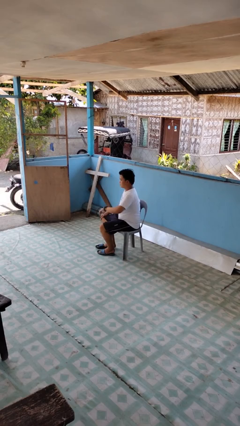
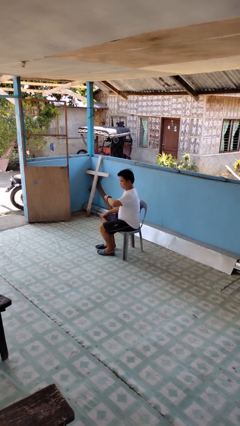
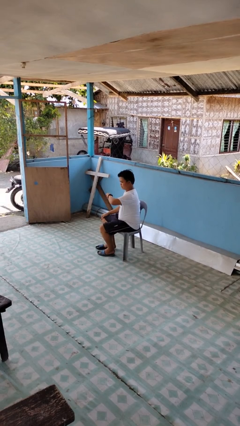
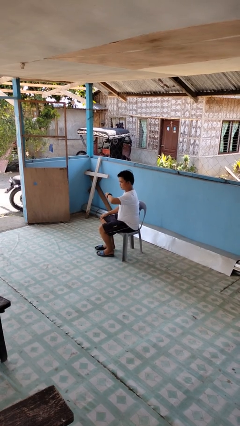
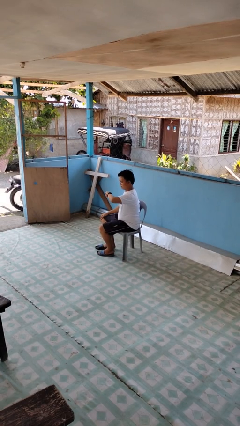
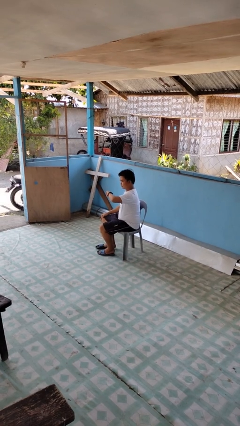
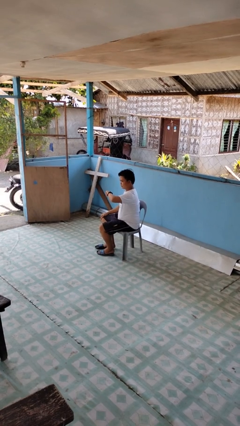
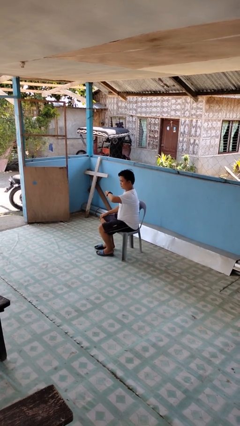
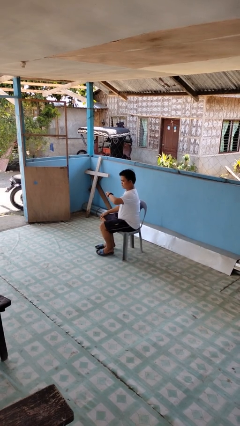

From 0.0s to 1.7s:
person looks at wristwatch

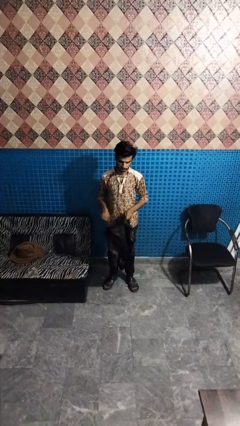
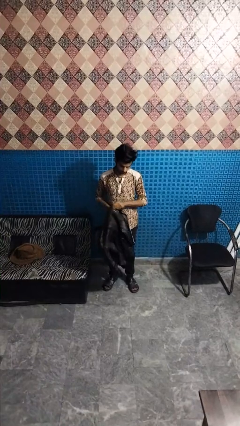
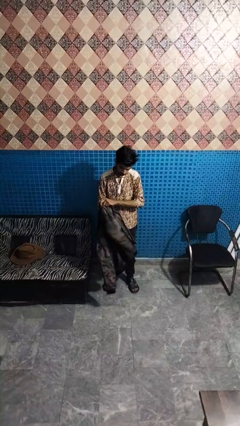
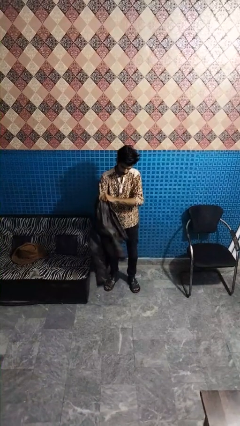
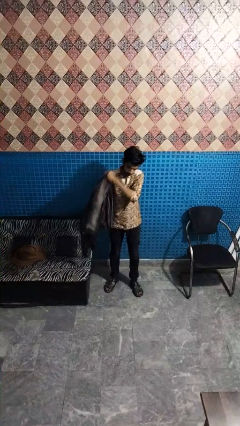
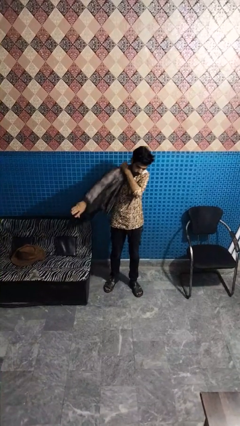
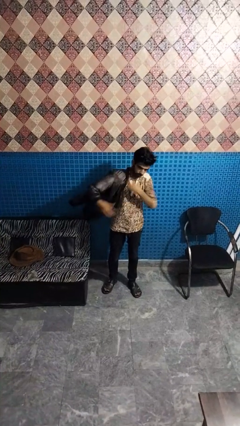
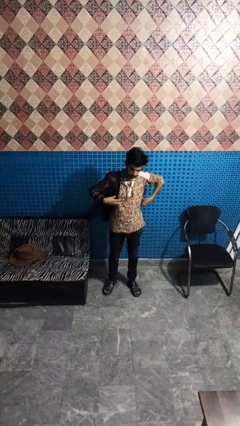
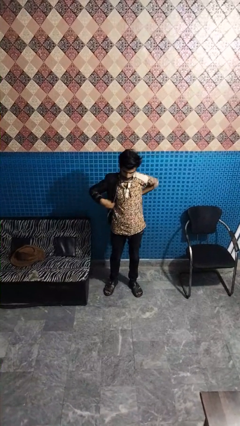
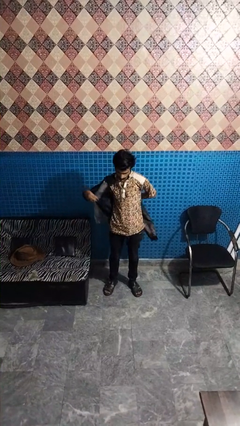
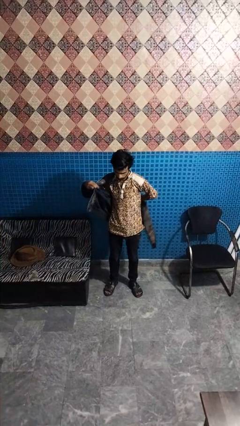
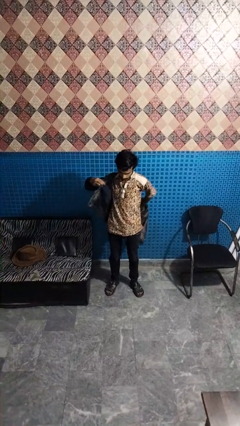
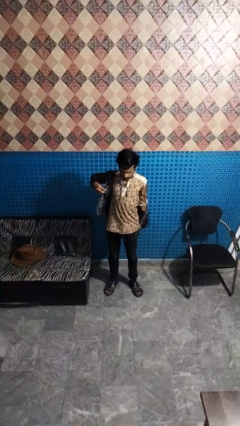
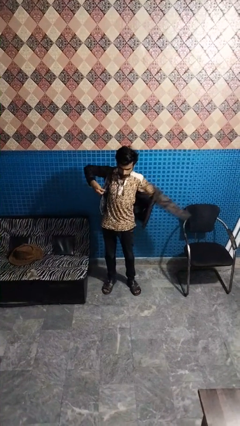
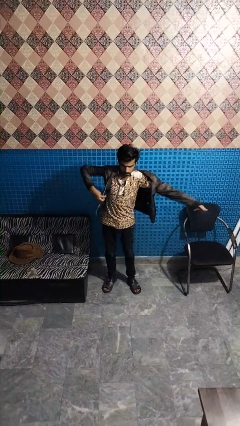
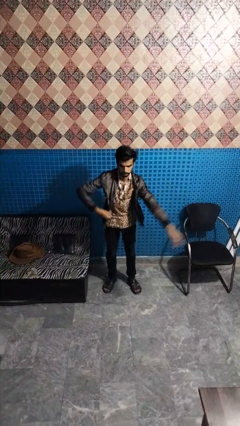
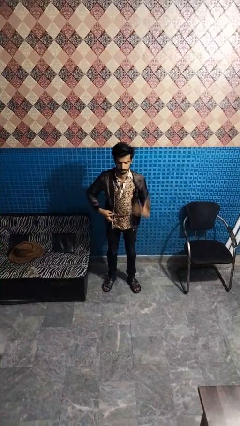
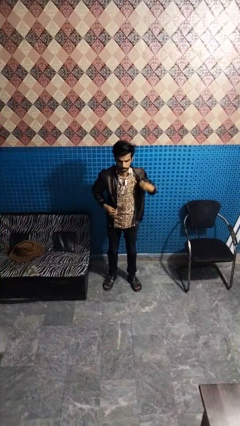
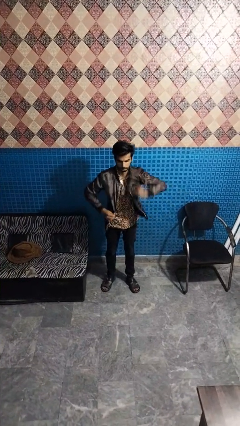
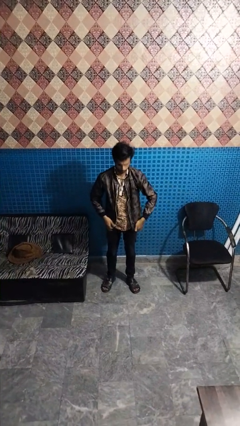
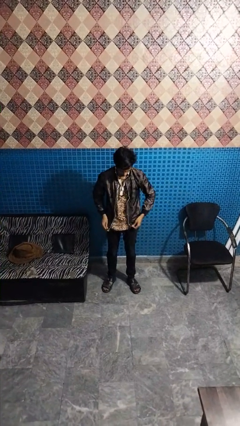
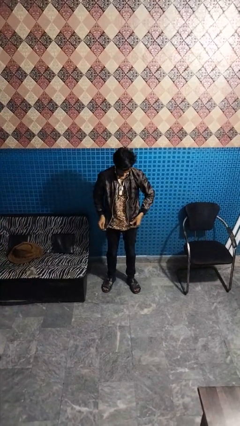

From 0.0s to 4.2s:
person puts on jacket

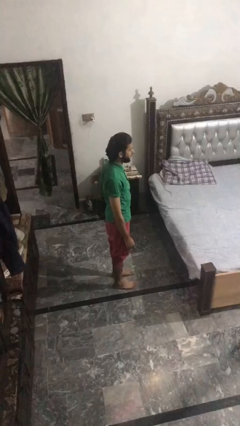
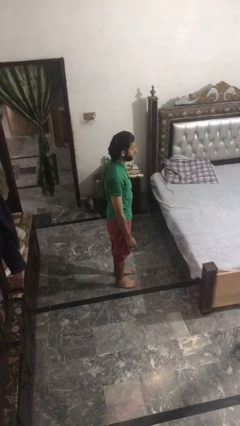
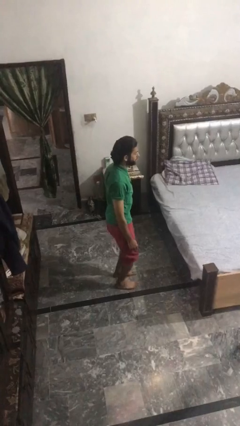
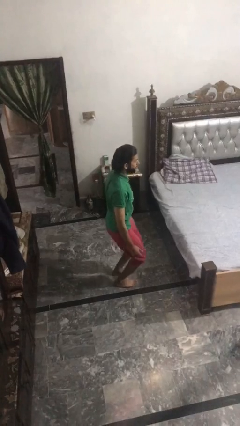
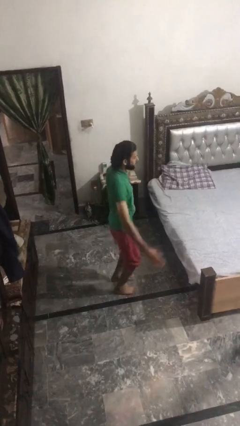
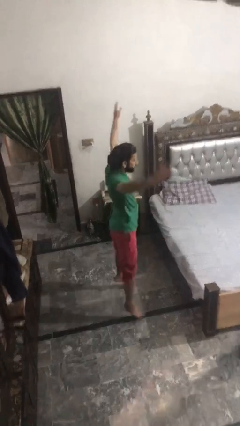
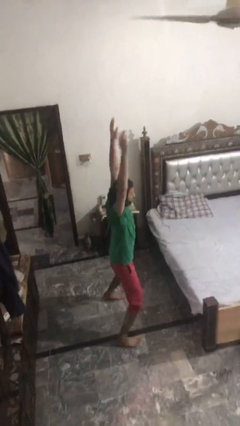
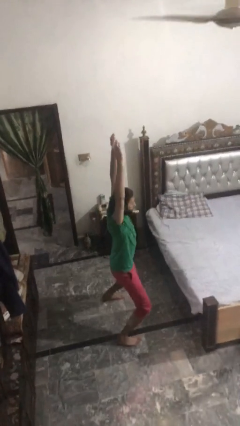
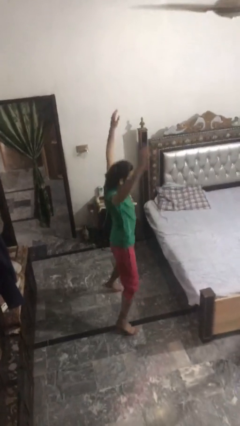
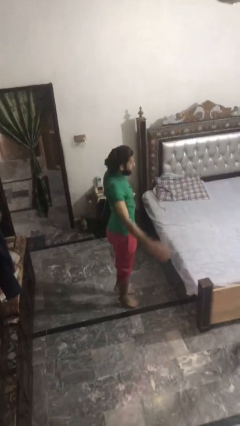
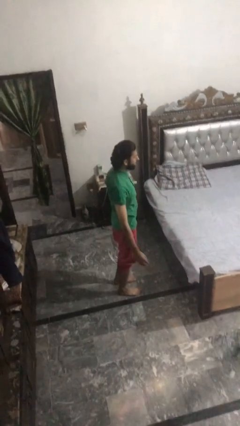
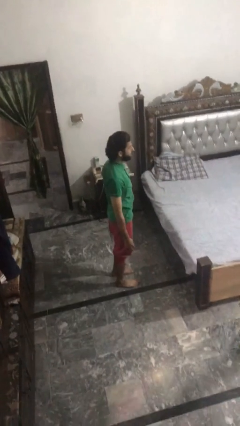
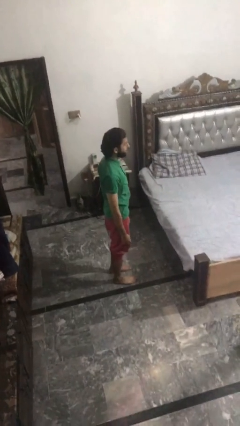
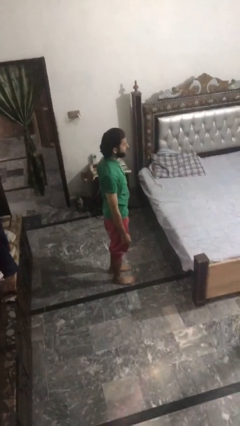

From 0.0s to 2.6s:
person exercises with jumping jacks

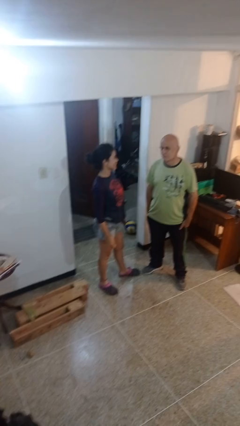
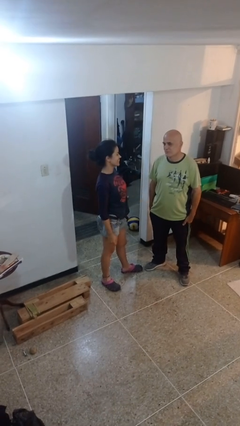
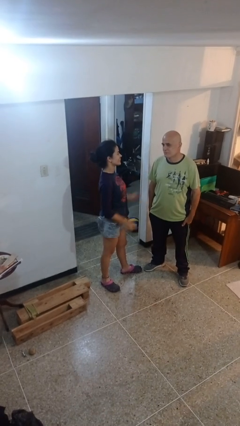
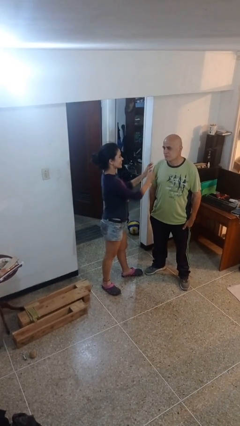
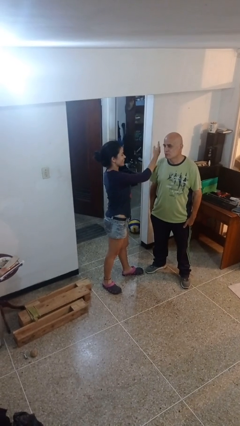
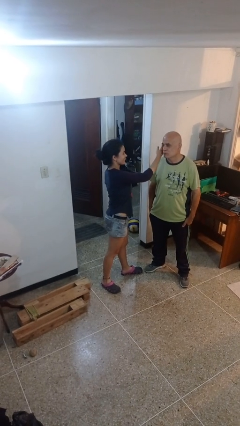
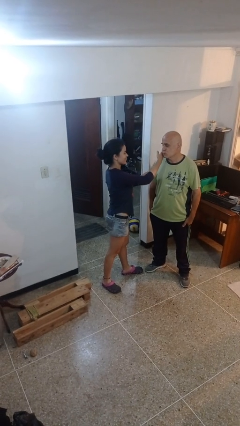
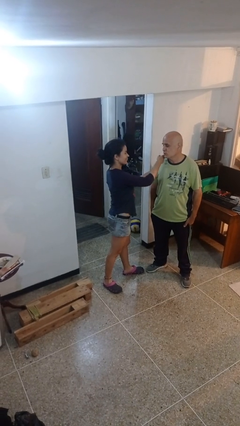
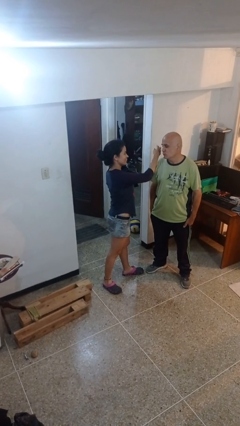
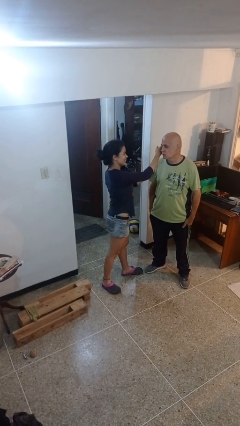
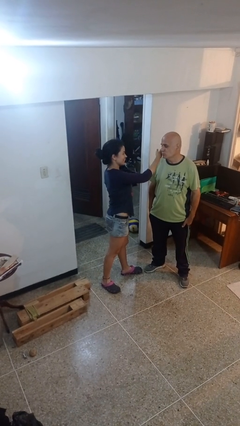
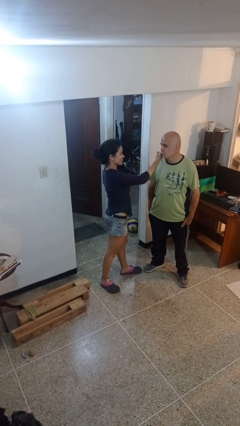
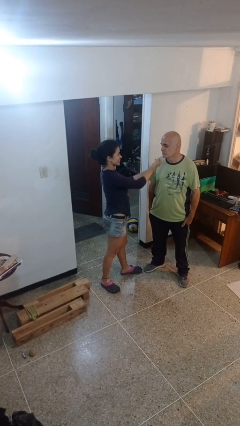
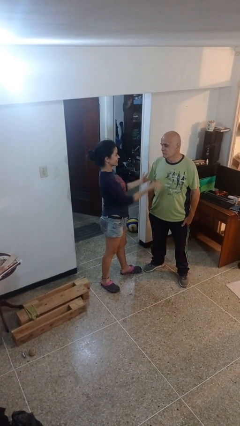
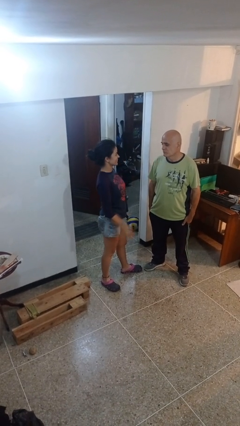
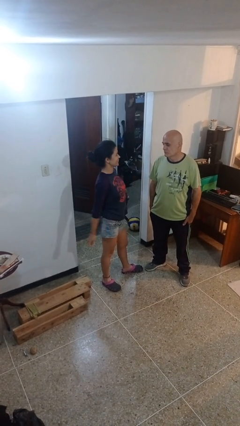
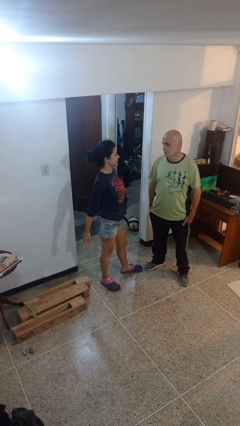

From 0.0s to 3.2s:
person touches face of person

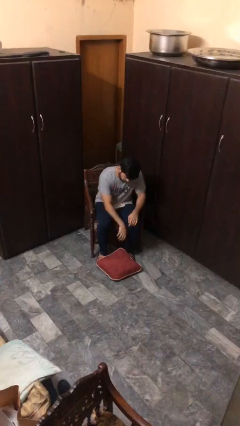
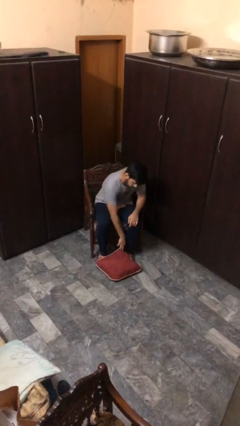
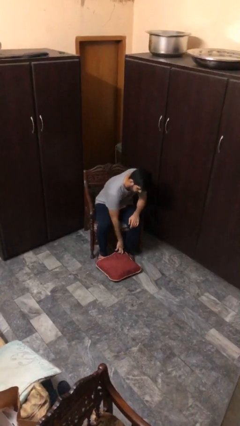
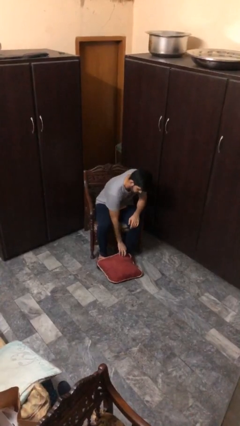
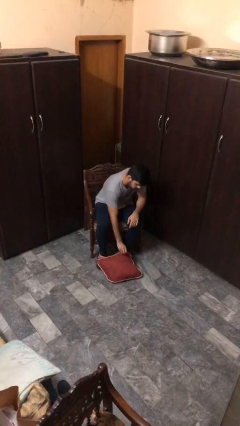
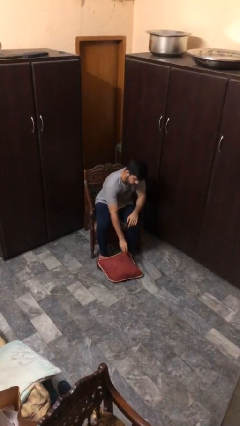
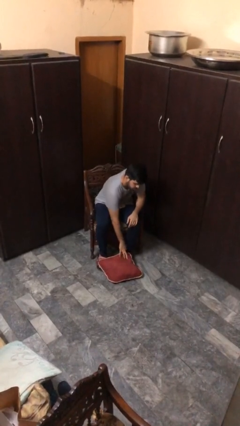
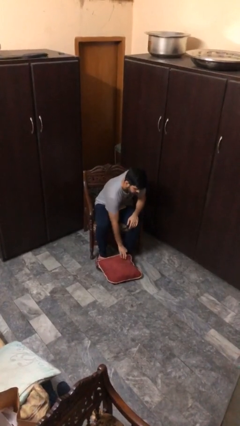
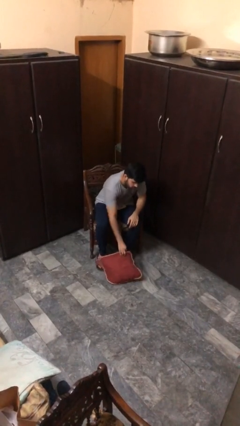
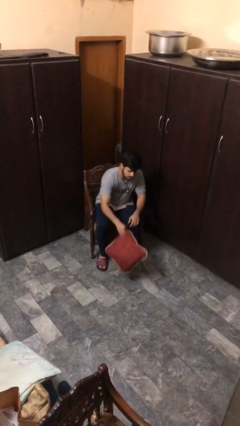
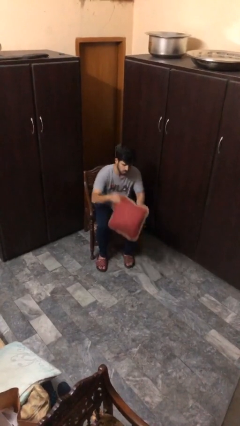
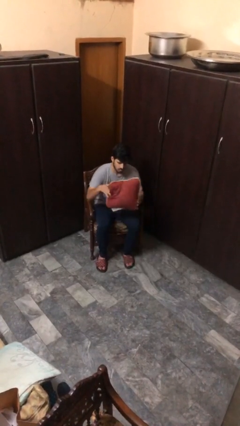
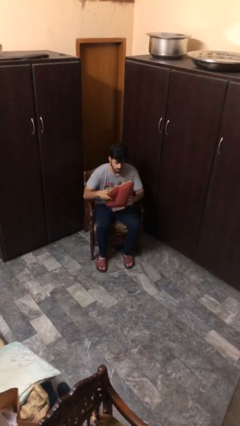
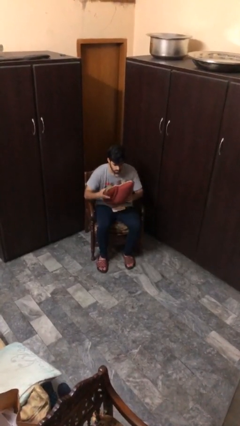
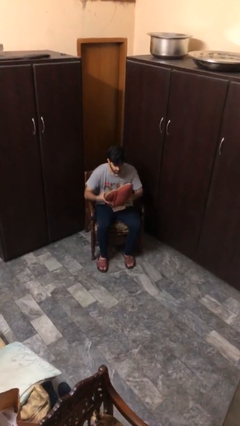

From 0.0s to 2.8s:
person picks up object from floor

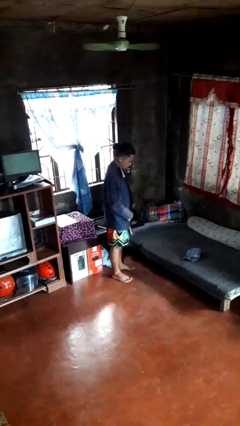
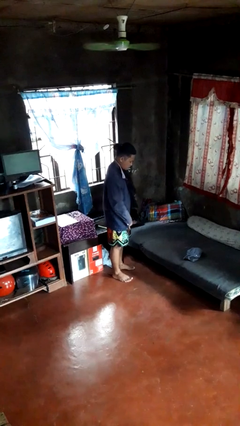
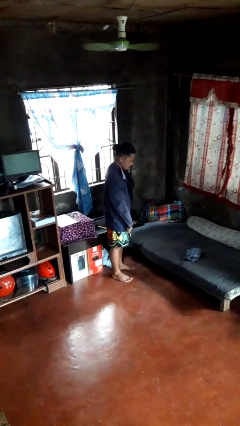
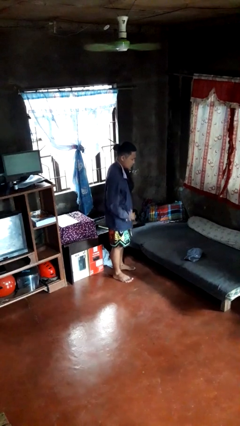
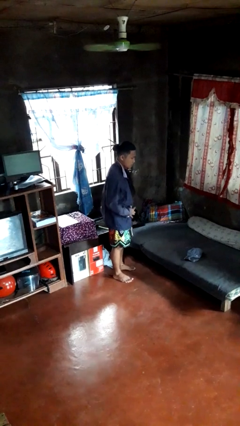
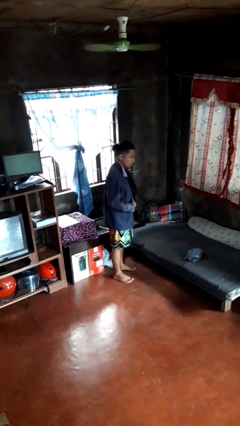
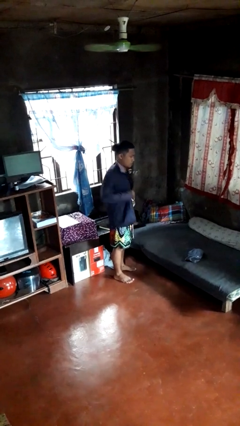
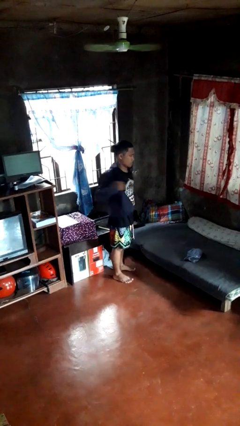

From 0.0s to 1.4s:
person unzips jacket

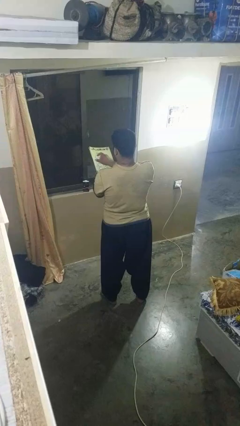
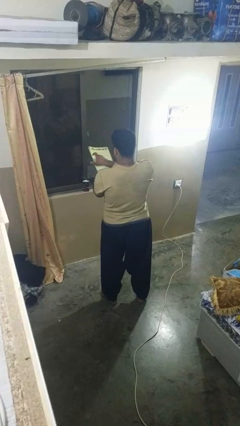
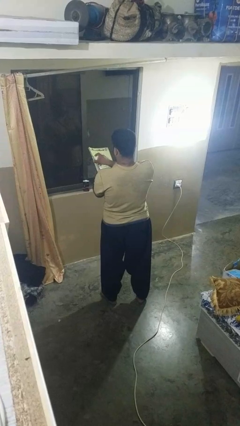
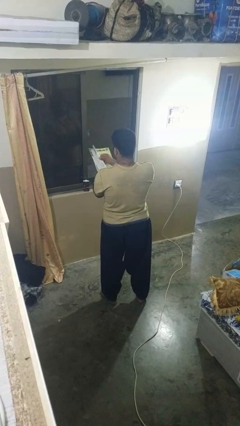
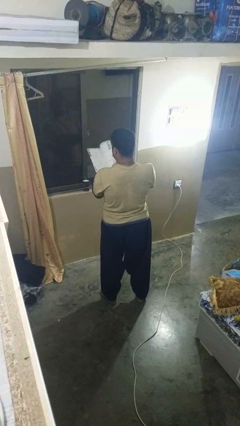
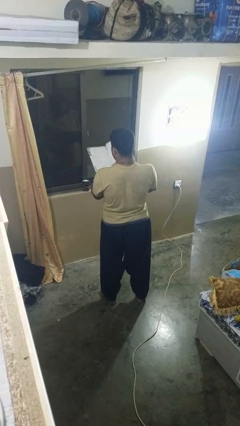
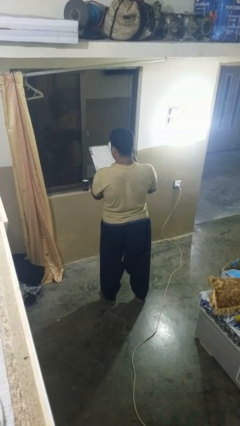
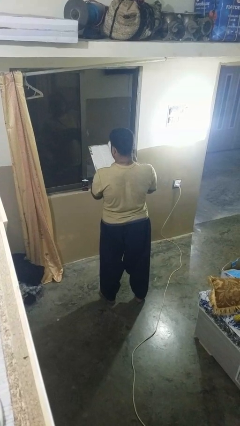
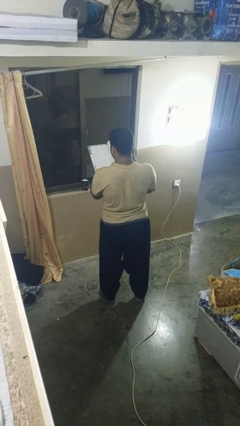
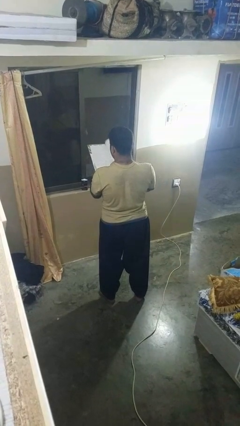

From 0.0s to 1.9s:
person reads magazine
